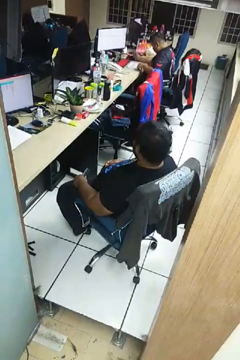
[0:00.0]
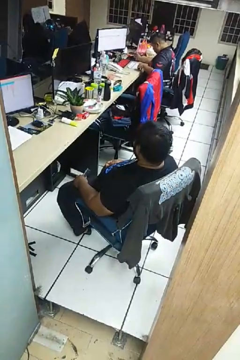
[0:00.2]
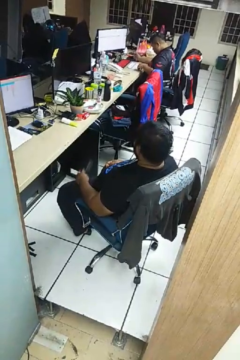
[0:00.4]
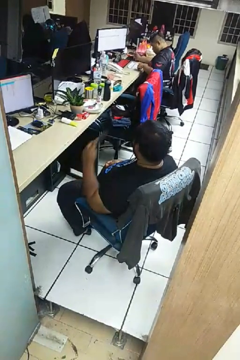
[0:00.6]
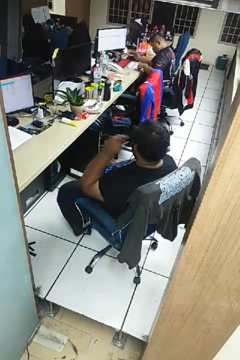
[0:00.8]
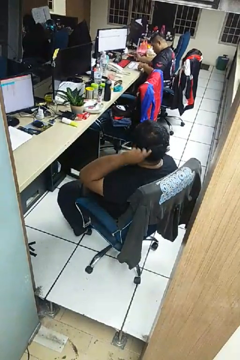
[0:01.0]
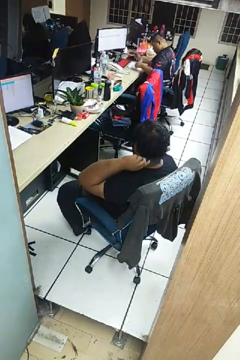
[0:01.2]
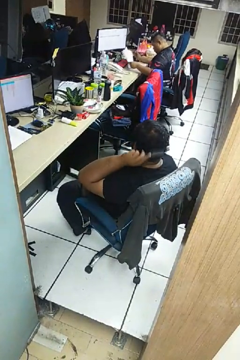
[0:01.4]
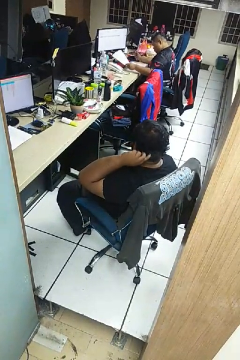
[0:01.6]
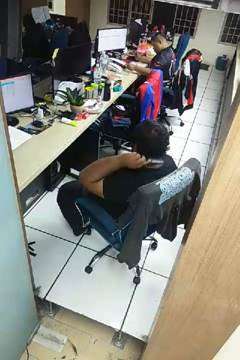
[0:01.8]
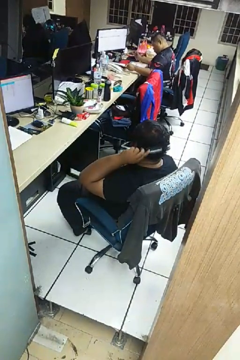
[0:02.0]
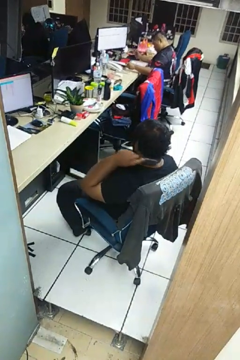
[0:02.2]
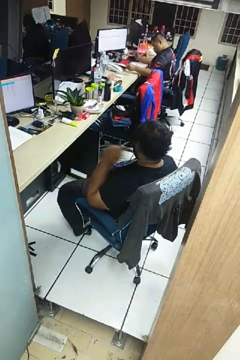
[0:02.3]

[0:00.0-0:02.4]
person brushes hair

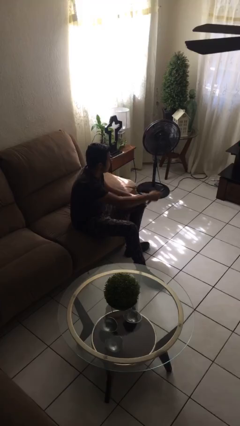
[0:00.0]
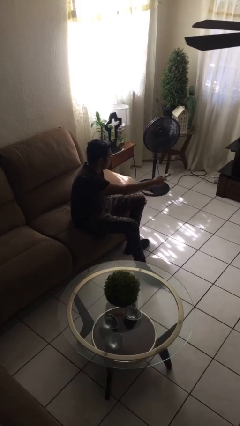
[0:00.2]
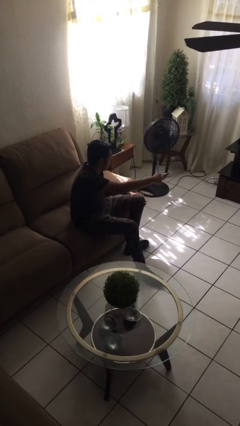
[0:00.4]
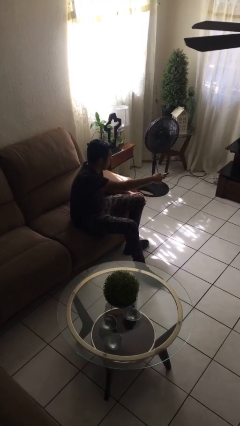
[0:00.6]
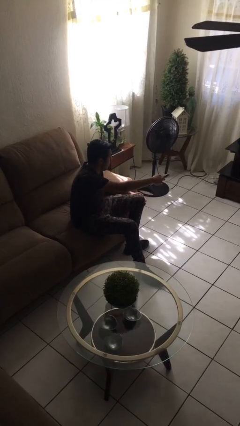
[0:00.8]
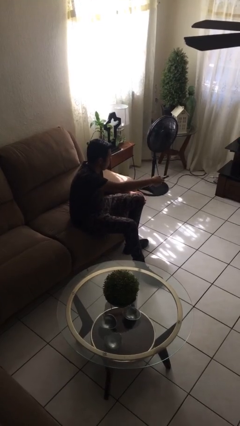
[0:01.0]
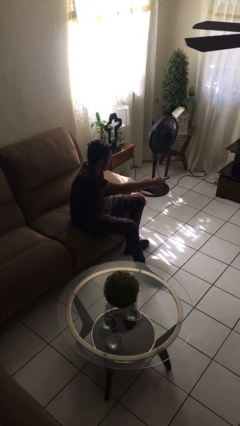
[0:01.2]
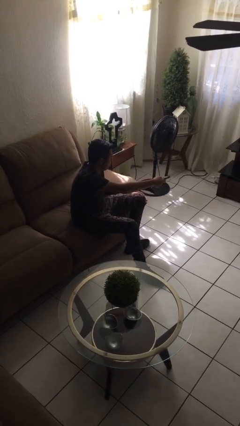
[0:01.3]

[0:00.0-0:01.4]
person uses television remote

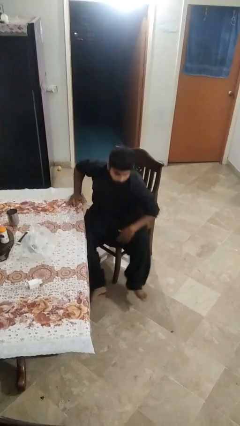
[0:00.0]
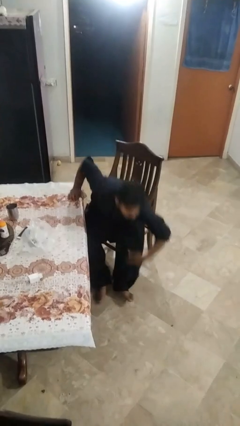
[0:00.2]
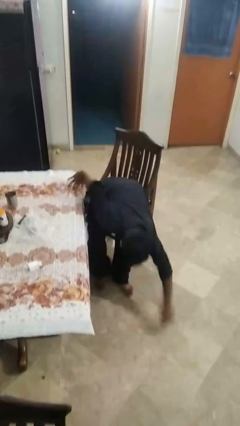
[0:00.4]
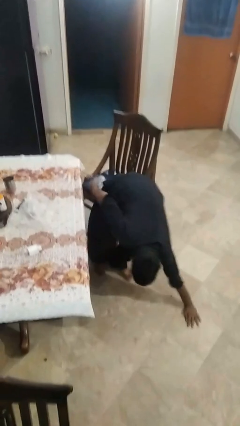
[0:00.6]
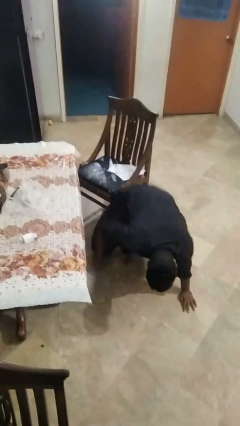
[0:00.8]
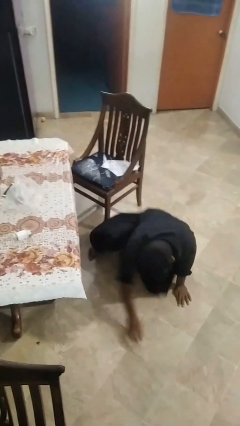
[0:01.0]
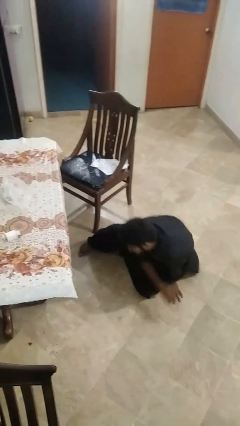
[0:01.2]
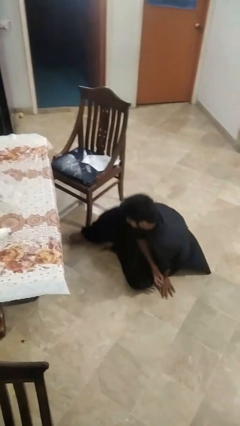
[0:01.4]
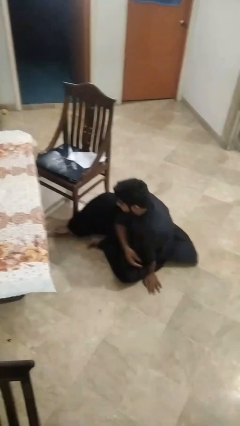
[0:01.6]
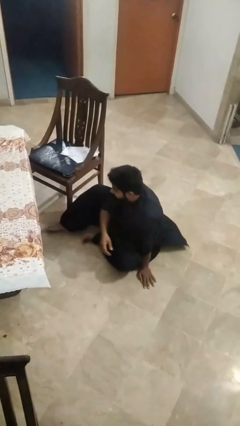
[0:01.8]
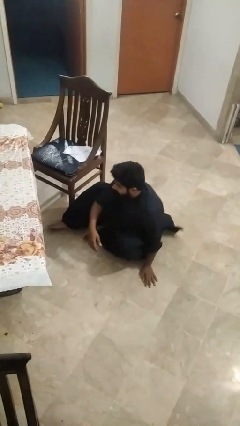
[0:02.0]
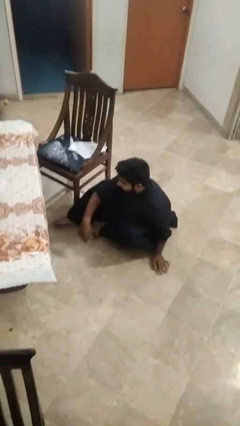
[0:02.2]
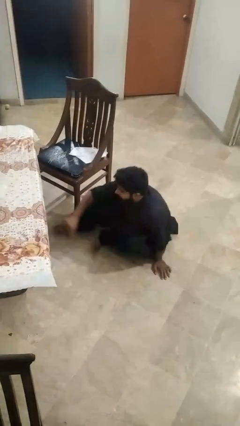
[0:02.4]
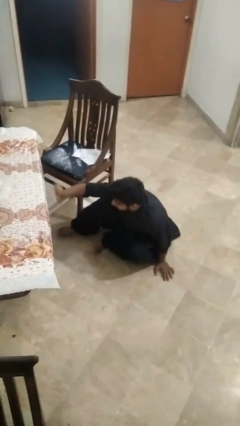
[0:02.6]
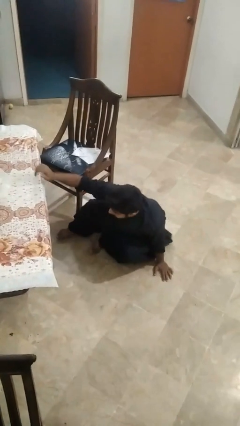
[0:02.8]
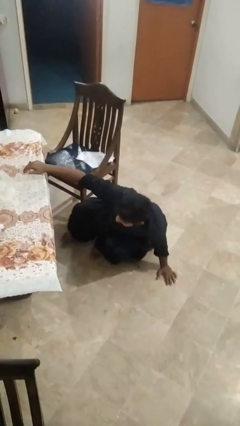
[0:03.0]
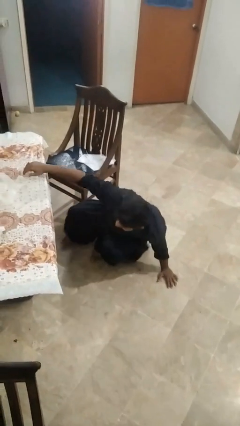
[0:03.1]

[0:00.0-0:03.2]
person falls from chair

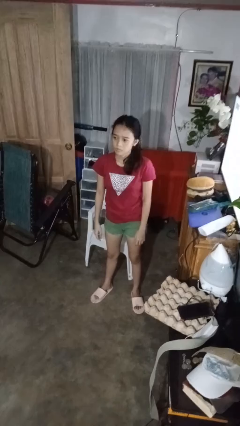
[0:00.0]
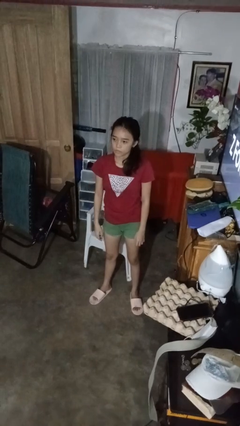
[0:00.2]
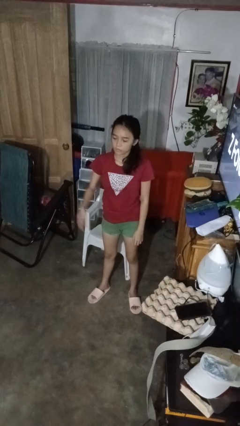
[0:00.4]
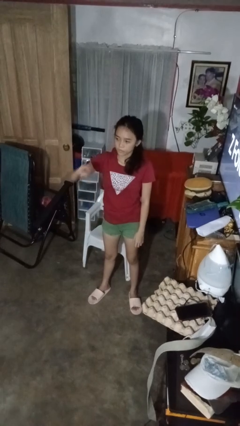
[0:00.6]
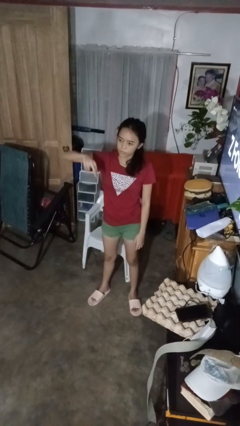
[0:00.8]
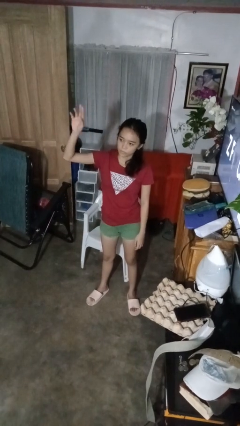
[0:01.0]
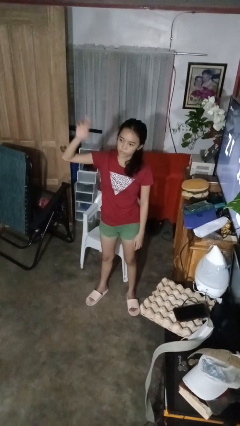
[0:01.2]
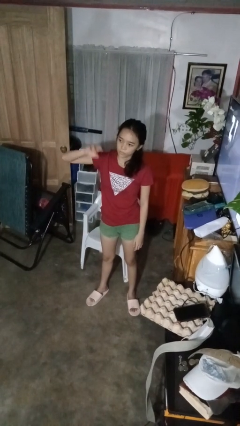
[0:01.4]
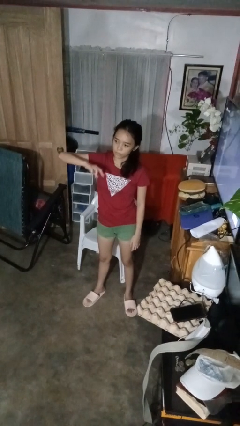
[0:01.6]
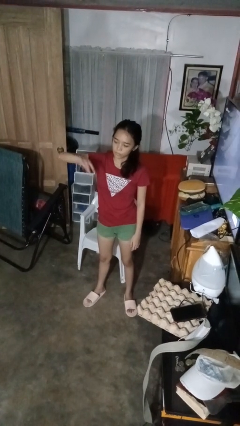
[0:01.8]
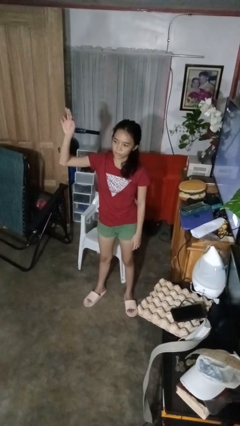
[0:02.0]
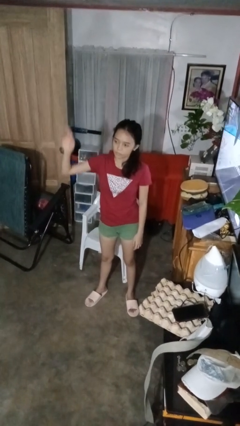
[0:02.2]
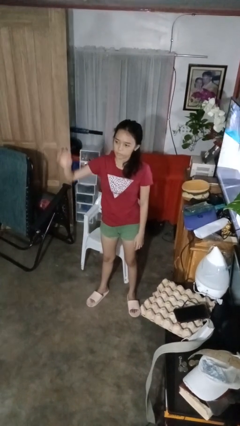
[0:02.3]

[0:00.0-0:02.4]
person gestures swipe up

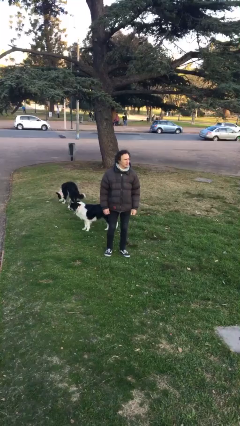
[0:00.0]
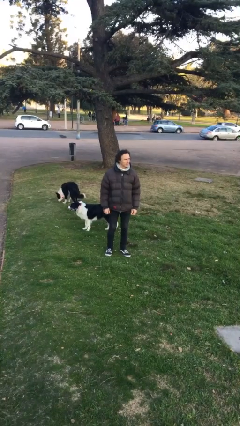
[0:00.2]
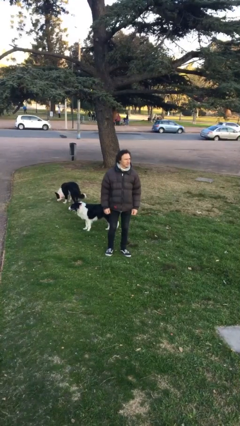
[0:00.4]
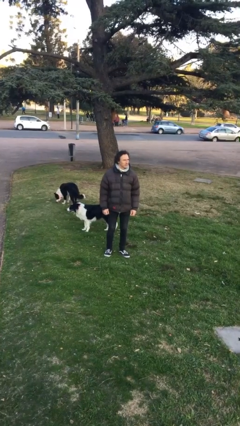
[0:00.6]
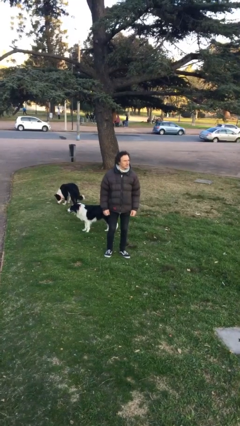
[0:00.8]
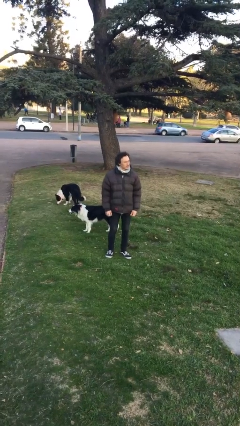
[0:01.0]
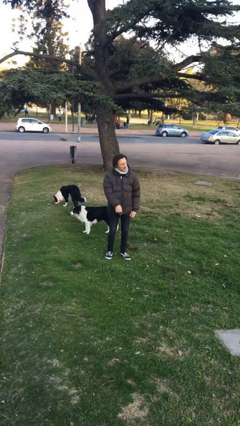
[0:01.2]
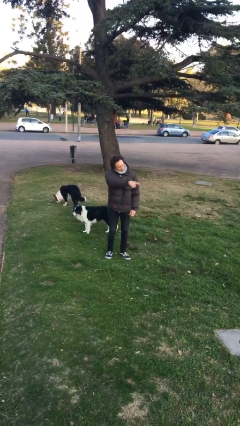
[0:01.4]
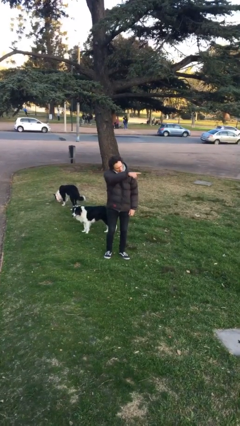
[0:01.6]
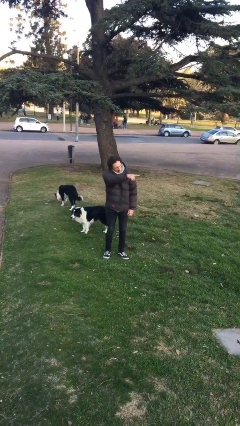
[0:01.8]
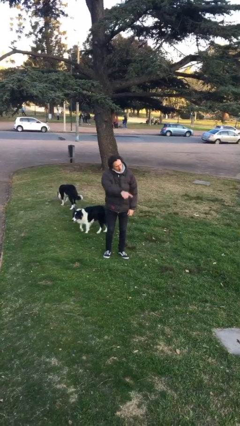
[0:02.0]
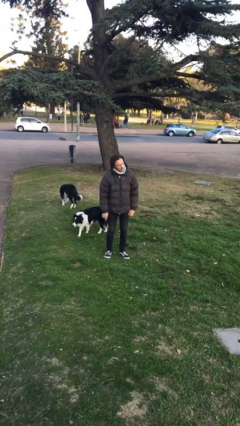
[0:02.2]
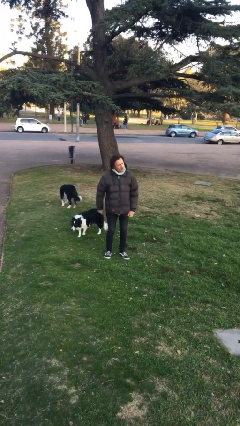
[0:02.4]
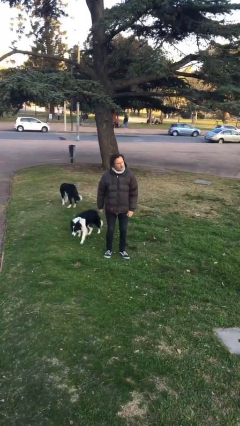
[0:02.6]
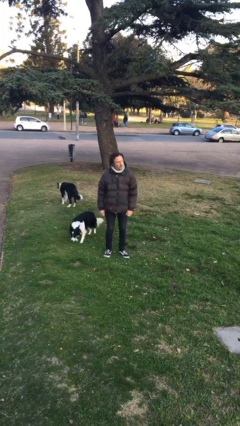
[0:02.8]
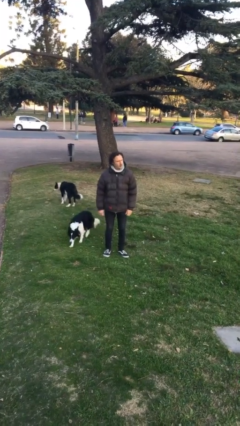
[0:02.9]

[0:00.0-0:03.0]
person points at person

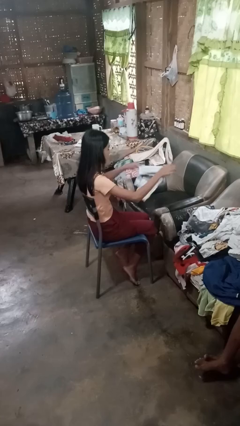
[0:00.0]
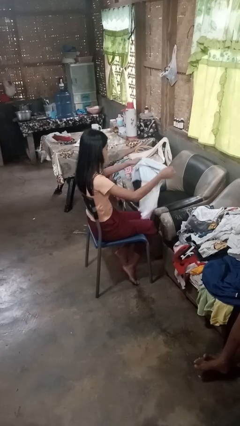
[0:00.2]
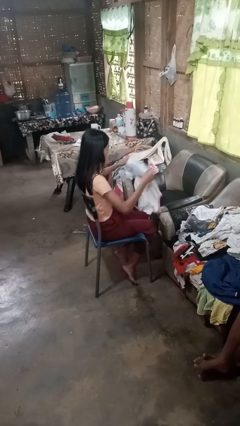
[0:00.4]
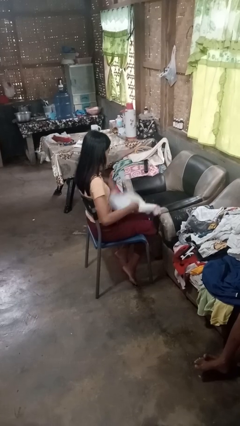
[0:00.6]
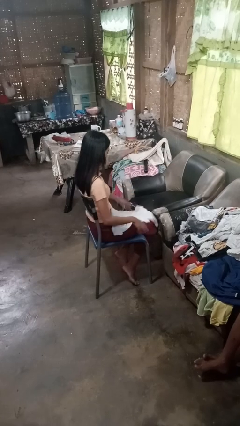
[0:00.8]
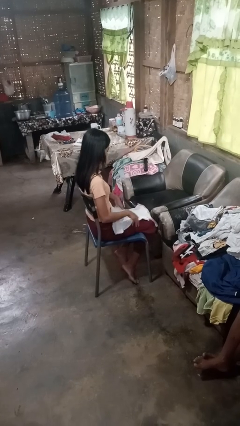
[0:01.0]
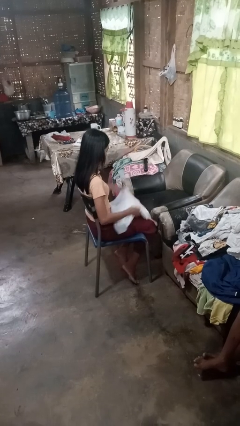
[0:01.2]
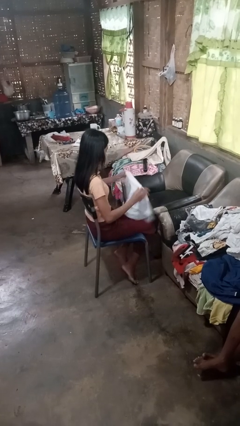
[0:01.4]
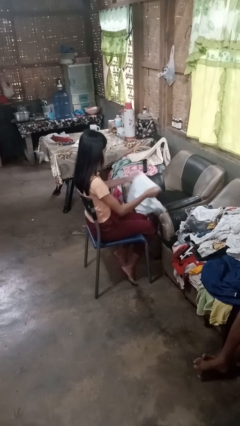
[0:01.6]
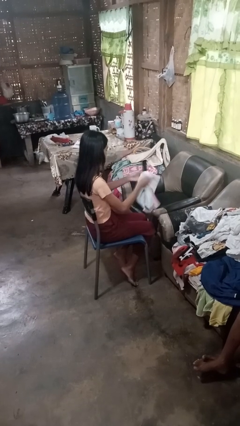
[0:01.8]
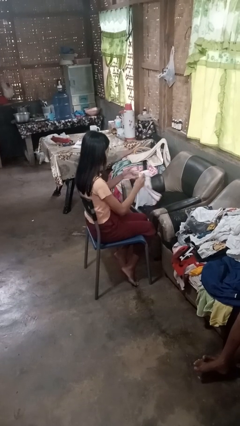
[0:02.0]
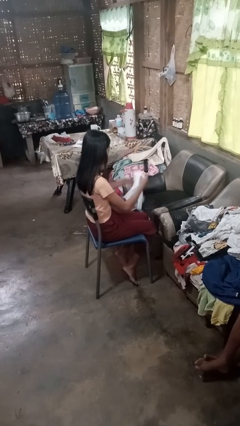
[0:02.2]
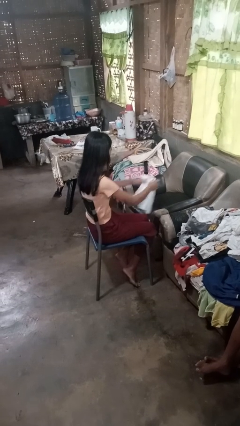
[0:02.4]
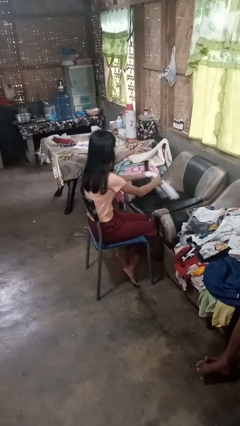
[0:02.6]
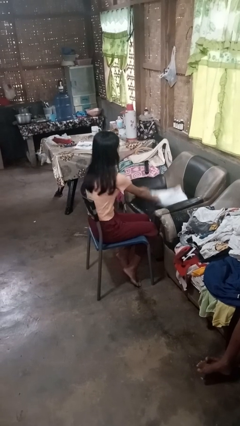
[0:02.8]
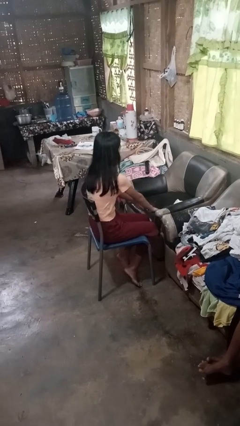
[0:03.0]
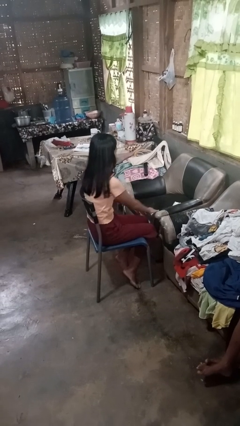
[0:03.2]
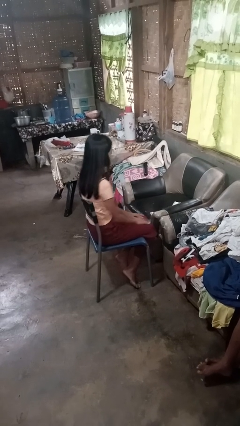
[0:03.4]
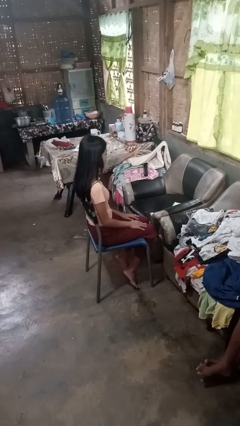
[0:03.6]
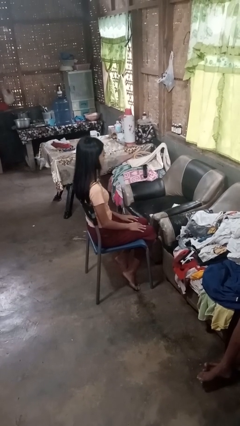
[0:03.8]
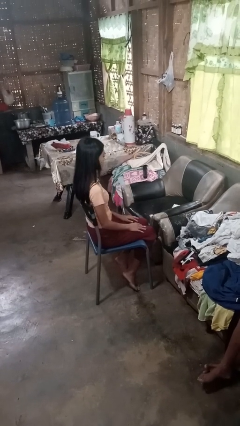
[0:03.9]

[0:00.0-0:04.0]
person folds shirt

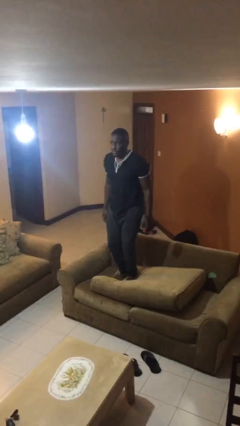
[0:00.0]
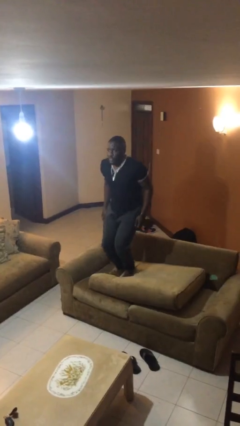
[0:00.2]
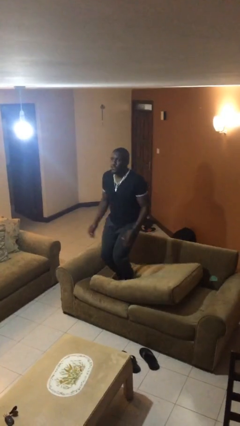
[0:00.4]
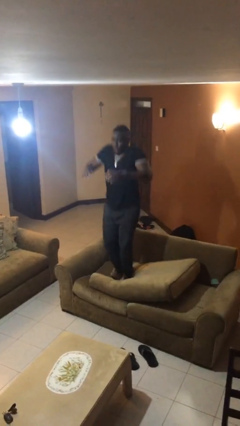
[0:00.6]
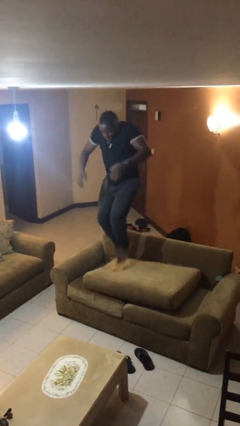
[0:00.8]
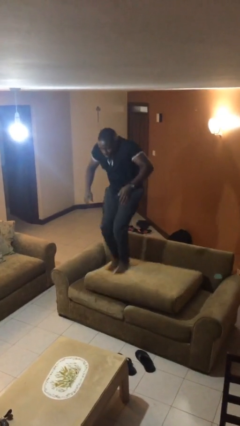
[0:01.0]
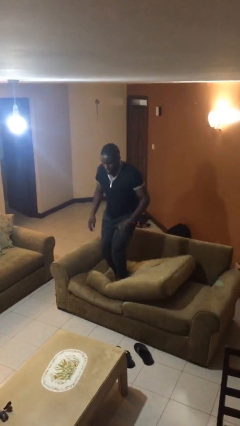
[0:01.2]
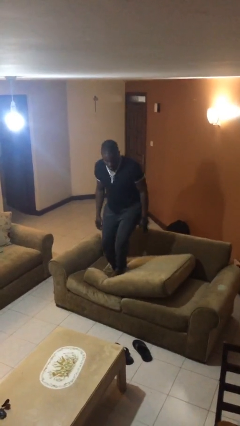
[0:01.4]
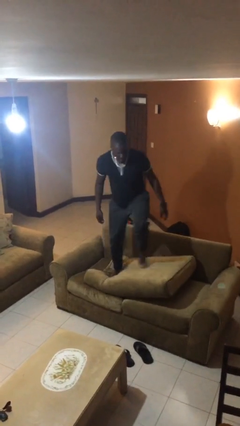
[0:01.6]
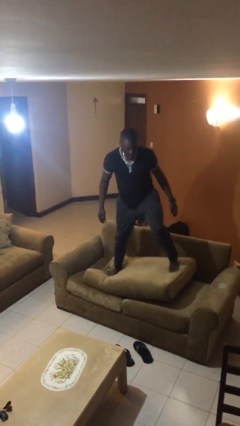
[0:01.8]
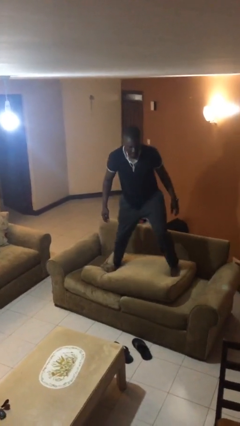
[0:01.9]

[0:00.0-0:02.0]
person jumps on couch
